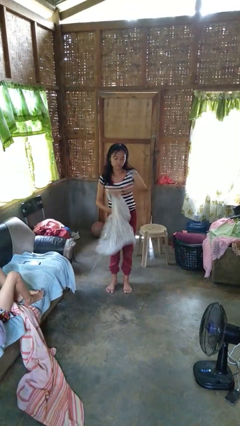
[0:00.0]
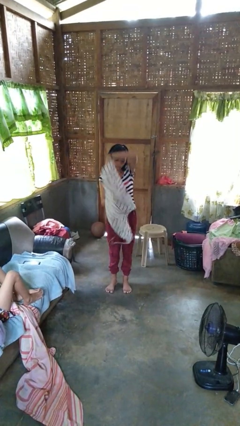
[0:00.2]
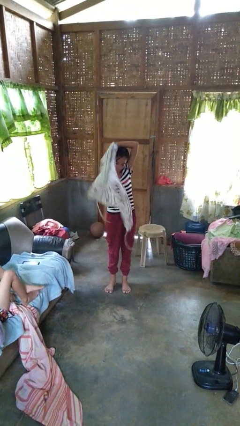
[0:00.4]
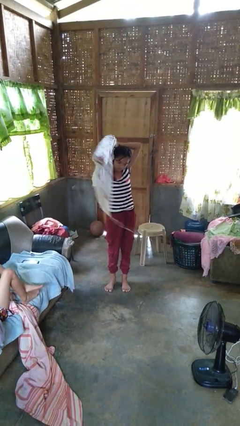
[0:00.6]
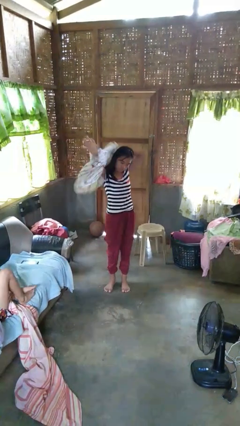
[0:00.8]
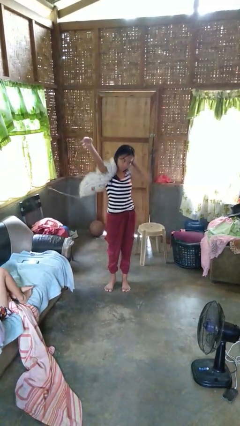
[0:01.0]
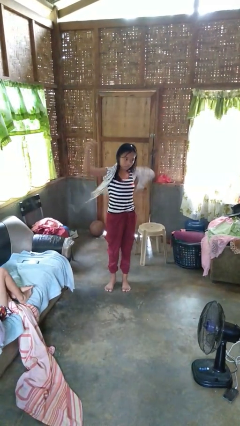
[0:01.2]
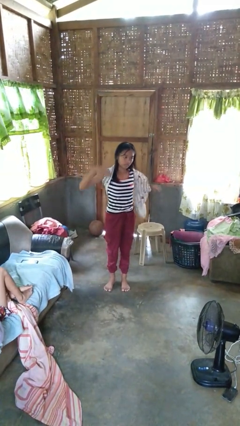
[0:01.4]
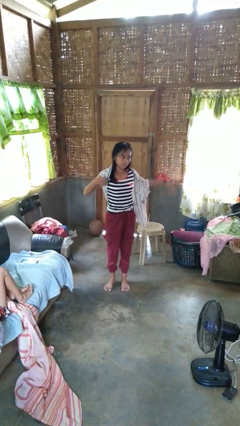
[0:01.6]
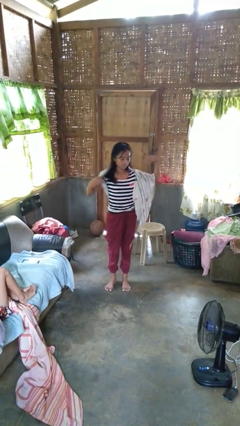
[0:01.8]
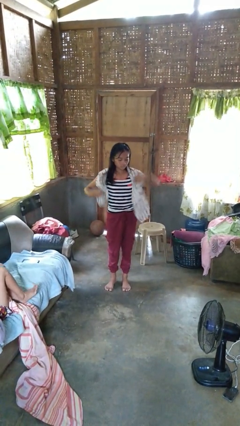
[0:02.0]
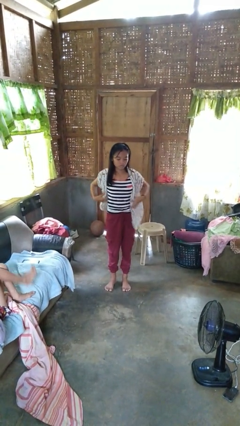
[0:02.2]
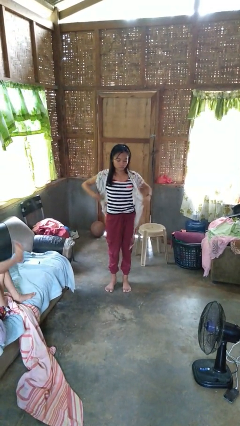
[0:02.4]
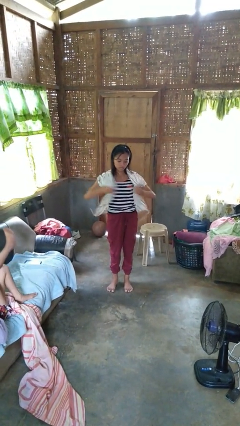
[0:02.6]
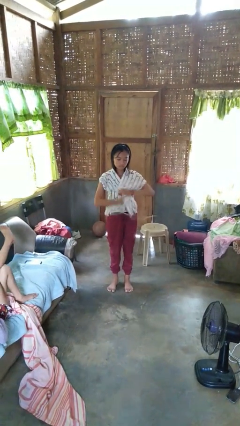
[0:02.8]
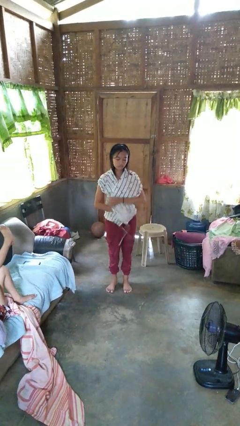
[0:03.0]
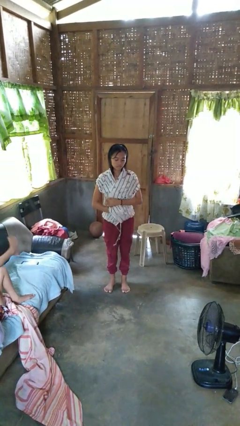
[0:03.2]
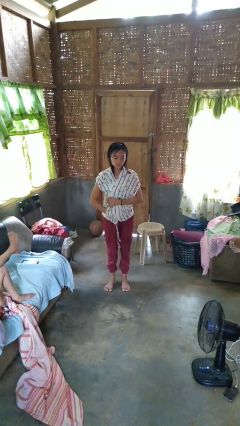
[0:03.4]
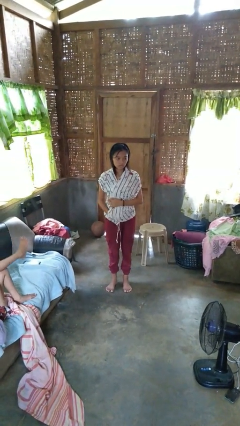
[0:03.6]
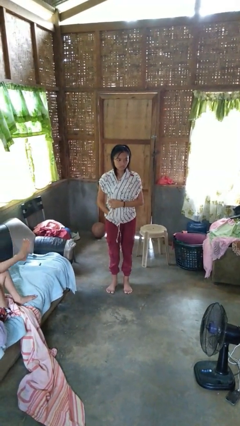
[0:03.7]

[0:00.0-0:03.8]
person puts on shirt

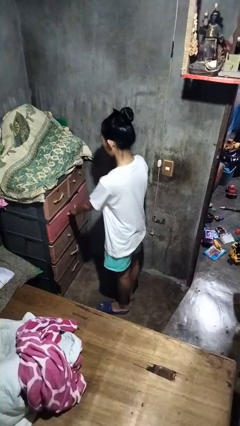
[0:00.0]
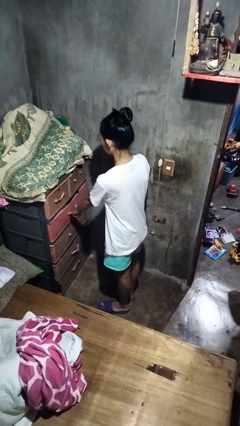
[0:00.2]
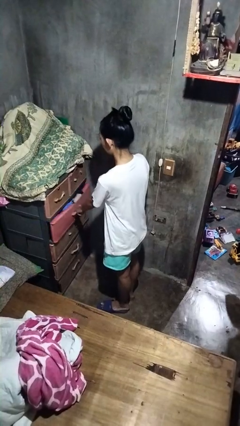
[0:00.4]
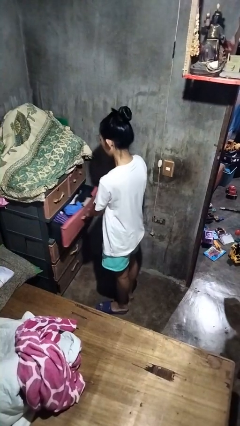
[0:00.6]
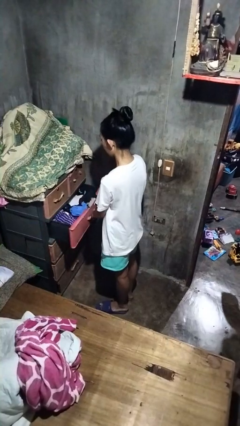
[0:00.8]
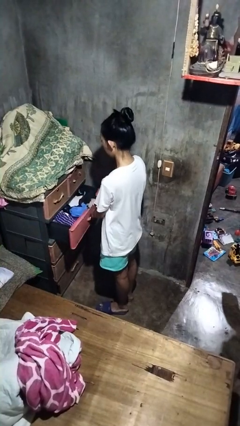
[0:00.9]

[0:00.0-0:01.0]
person opens dresser drawer

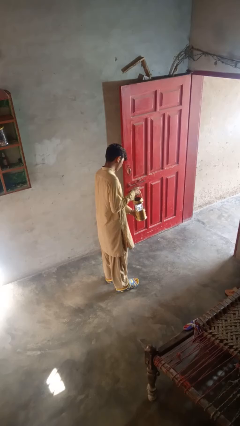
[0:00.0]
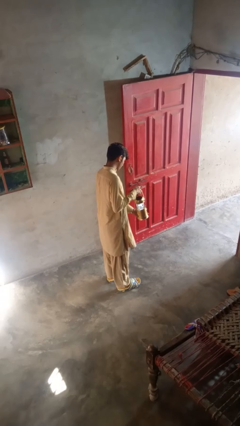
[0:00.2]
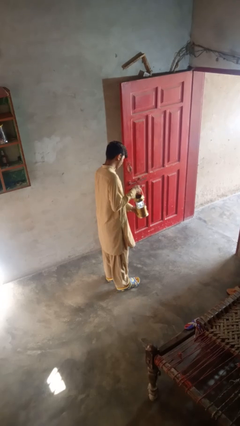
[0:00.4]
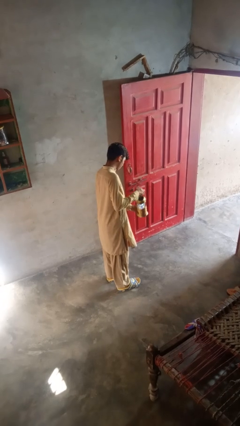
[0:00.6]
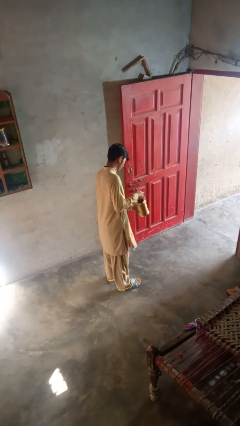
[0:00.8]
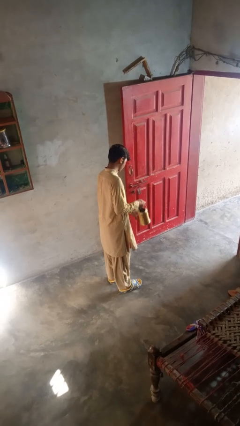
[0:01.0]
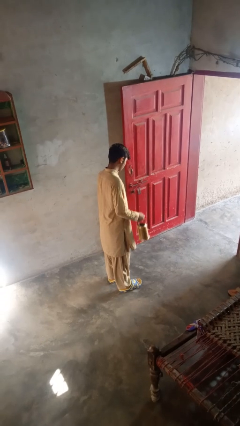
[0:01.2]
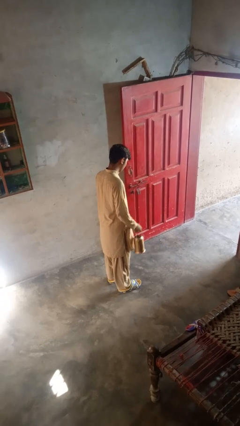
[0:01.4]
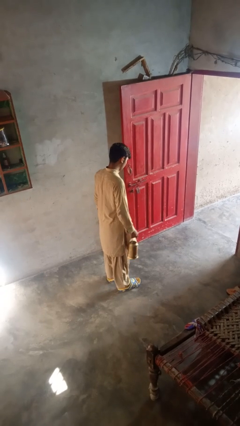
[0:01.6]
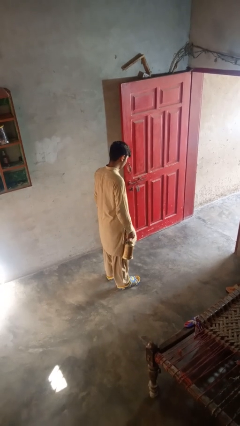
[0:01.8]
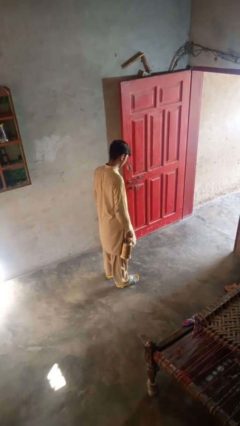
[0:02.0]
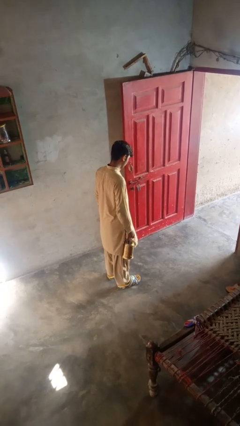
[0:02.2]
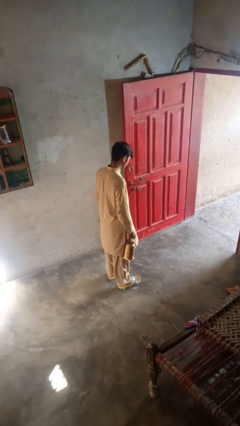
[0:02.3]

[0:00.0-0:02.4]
person turns off lamp

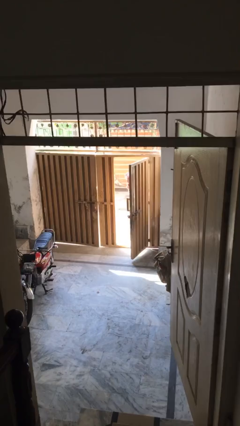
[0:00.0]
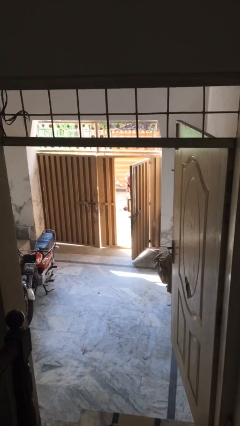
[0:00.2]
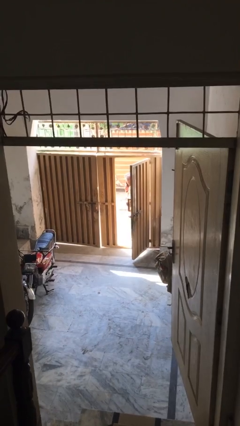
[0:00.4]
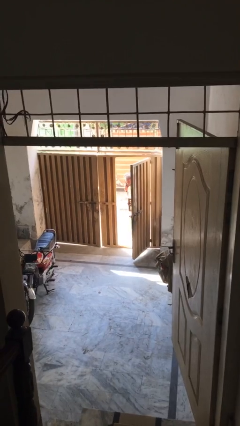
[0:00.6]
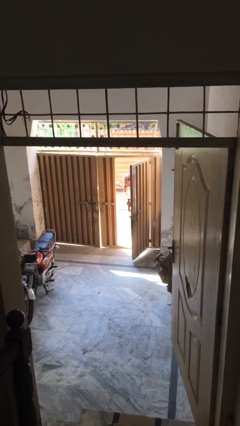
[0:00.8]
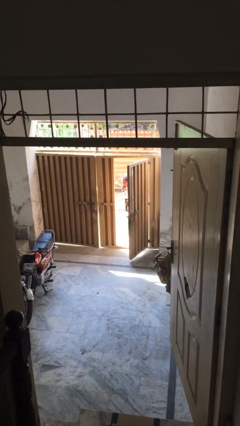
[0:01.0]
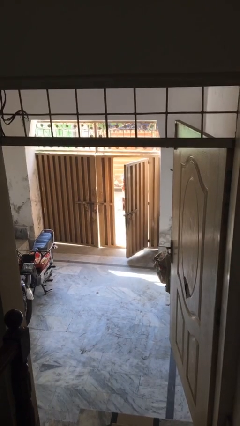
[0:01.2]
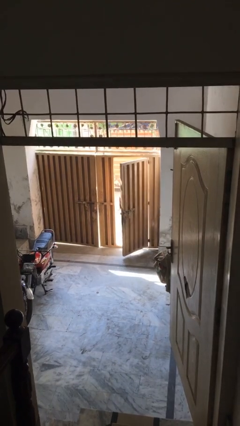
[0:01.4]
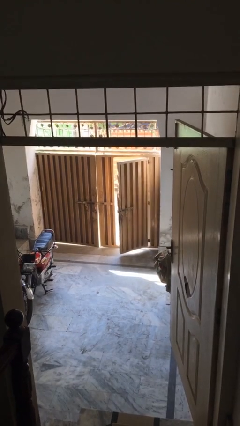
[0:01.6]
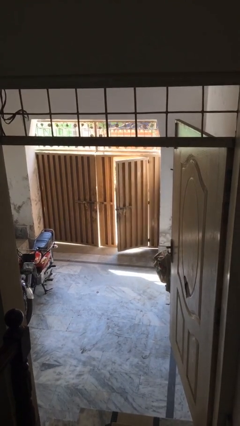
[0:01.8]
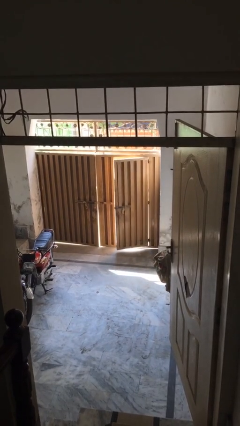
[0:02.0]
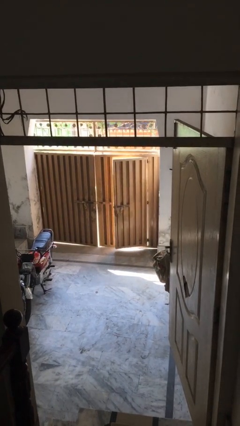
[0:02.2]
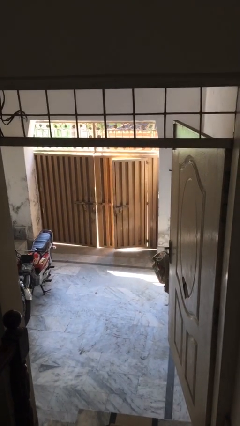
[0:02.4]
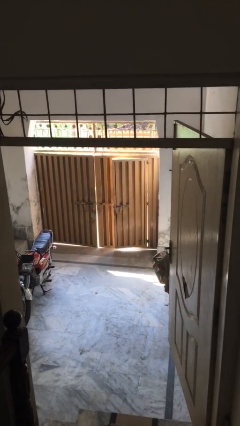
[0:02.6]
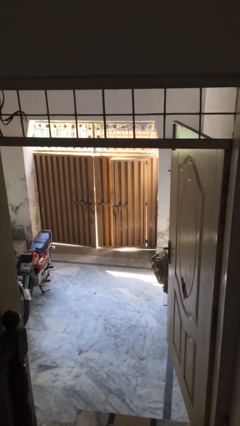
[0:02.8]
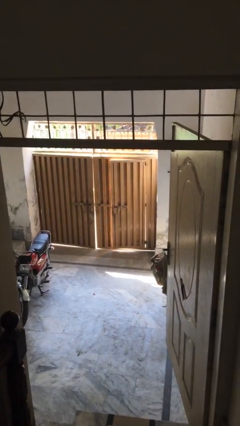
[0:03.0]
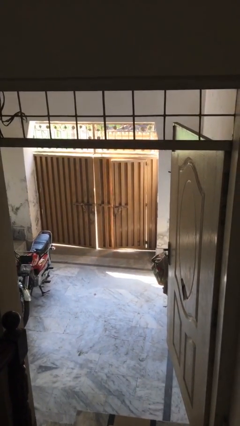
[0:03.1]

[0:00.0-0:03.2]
person closes facility door

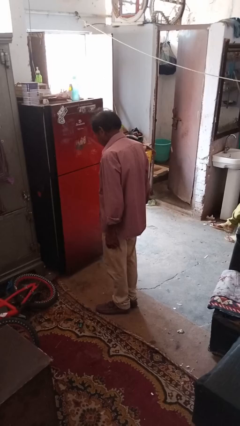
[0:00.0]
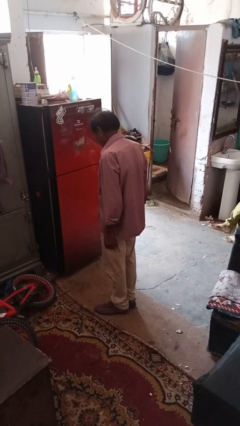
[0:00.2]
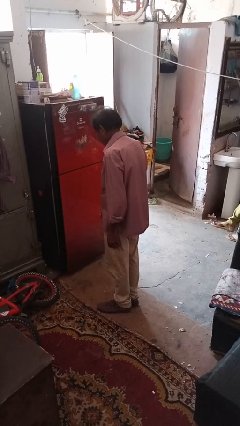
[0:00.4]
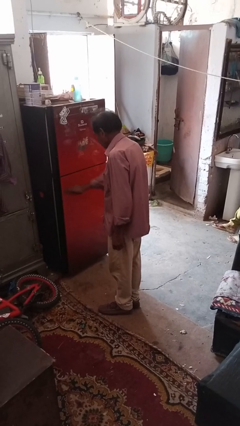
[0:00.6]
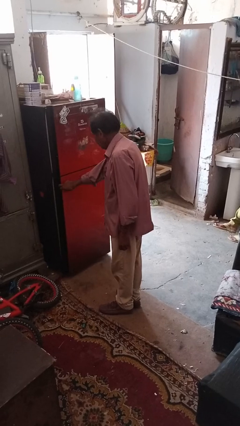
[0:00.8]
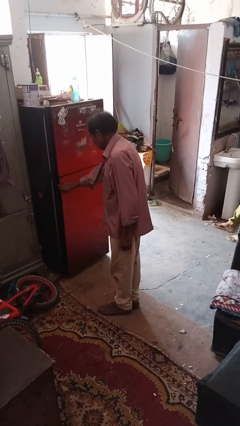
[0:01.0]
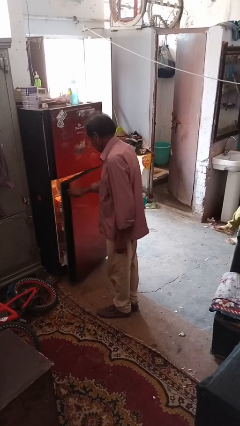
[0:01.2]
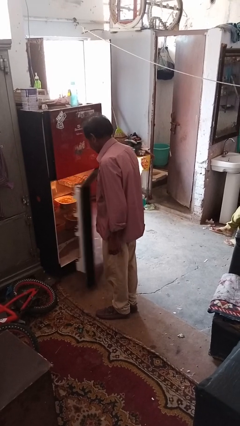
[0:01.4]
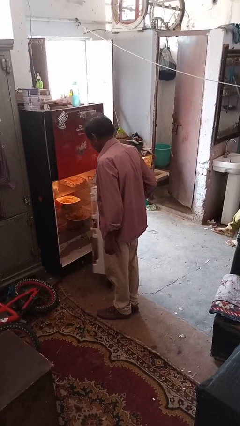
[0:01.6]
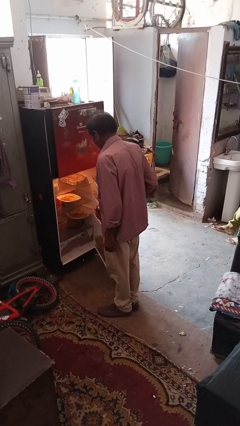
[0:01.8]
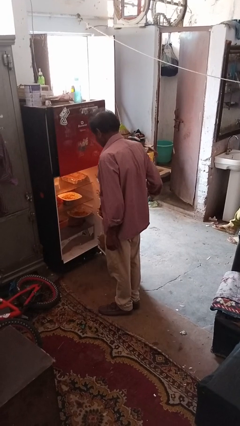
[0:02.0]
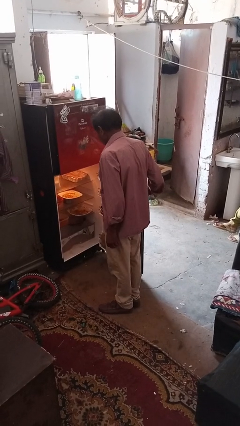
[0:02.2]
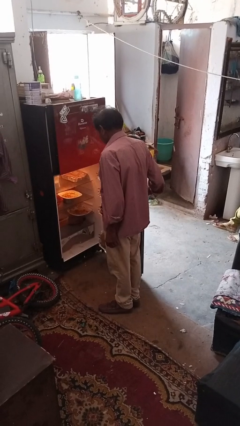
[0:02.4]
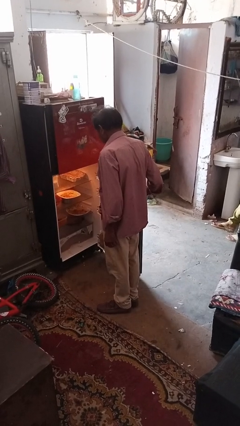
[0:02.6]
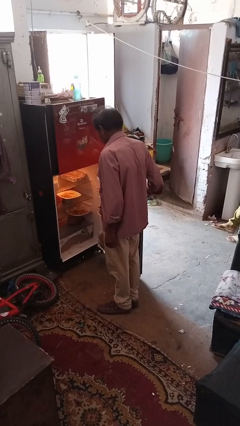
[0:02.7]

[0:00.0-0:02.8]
person opens refrigerator

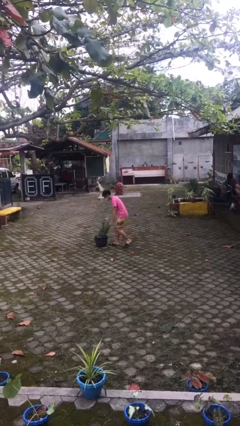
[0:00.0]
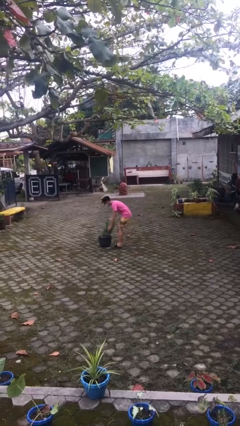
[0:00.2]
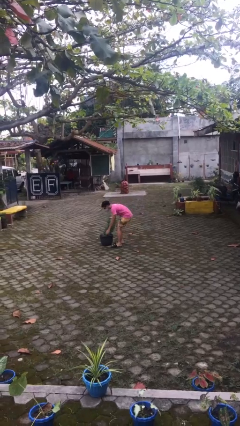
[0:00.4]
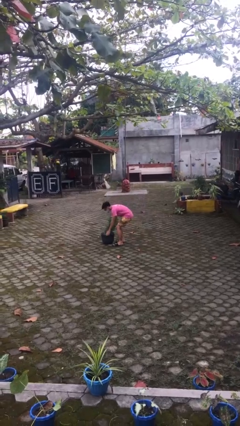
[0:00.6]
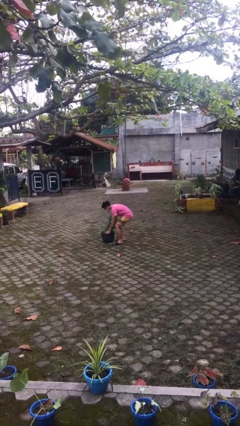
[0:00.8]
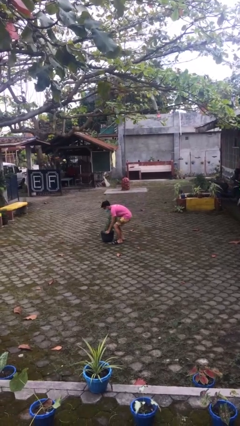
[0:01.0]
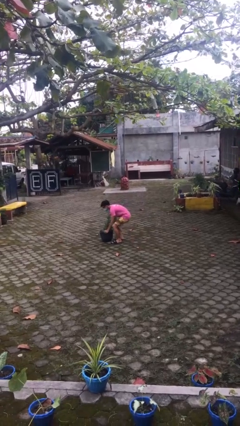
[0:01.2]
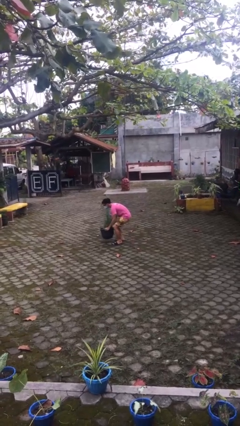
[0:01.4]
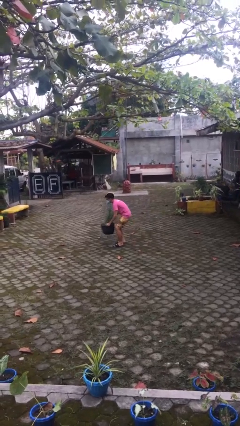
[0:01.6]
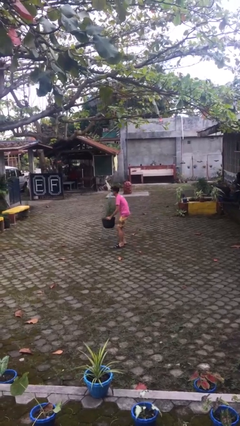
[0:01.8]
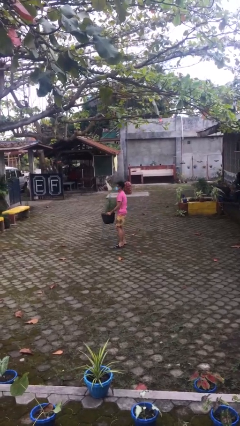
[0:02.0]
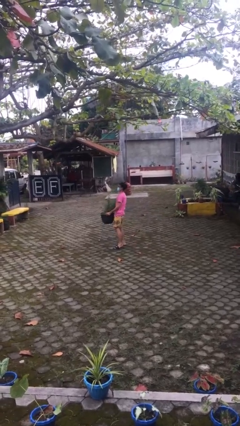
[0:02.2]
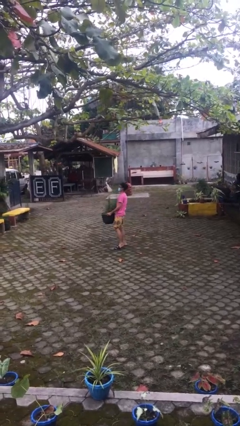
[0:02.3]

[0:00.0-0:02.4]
person picks up object from floor

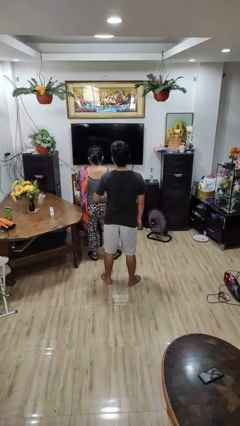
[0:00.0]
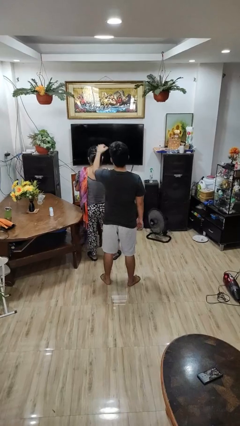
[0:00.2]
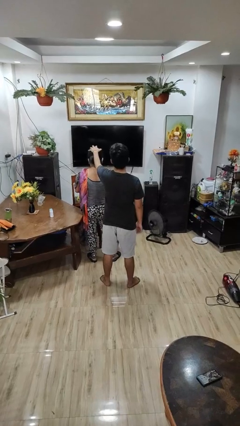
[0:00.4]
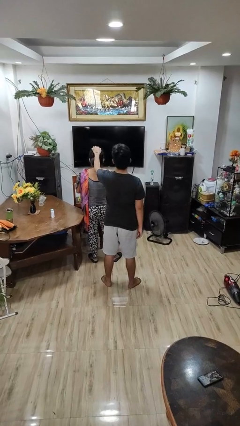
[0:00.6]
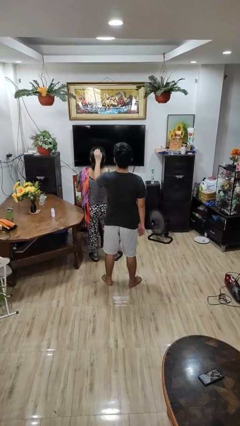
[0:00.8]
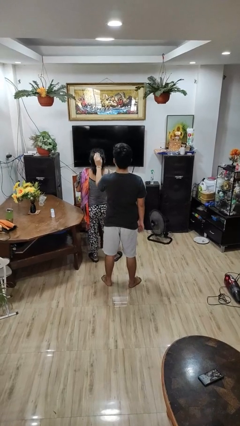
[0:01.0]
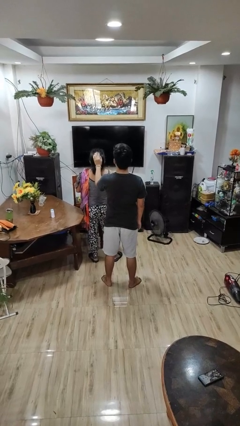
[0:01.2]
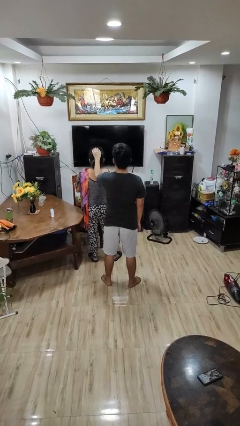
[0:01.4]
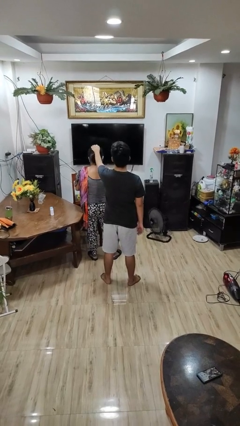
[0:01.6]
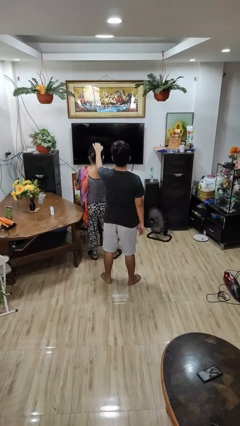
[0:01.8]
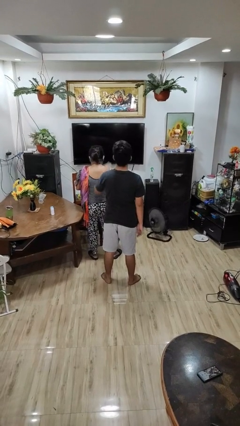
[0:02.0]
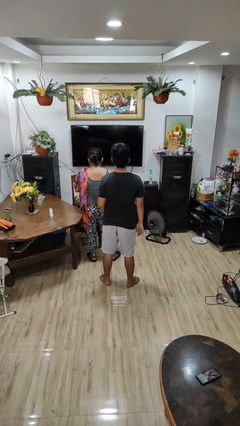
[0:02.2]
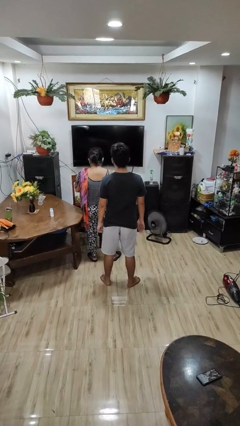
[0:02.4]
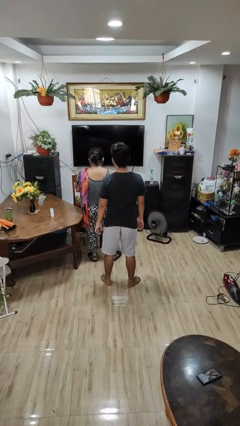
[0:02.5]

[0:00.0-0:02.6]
person grabs person by hair
